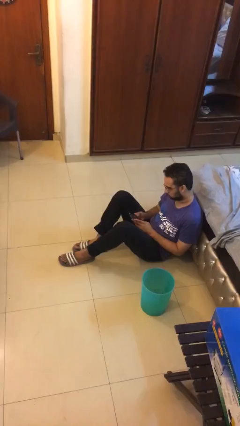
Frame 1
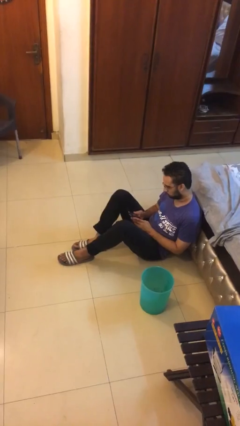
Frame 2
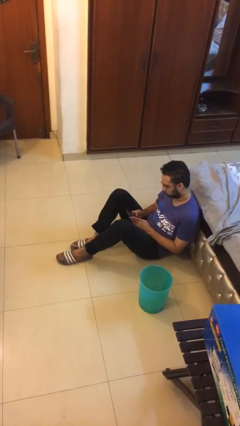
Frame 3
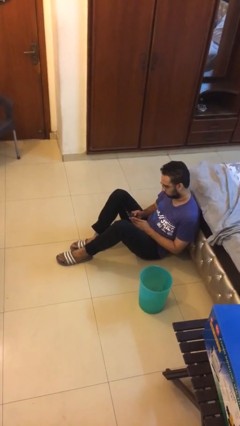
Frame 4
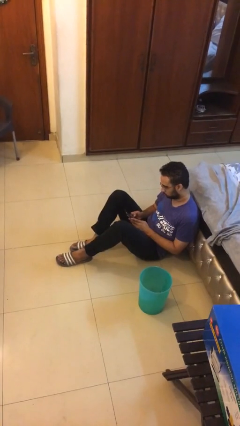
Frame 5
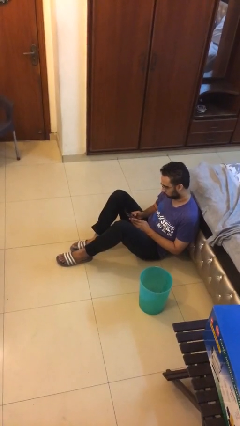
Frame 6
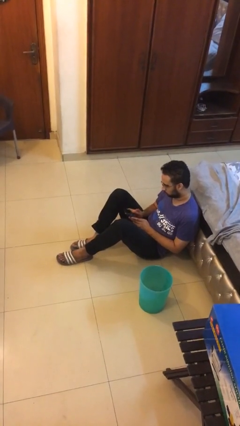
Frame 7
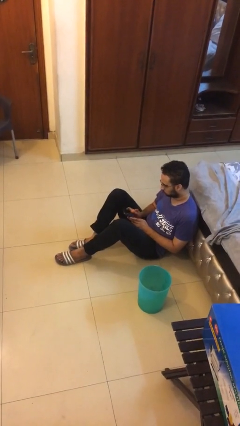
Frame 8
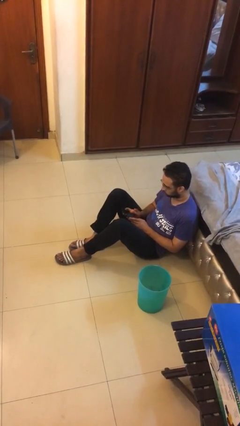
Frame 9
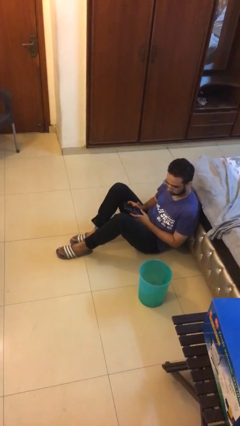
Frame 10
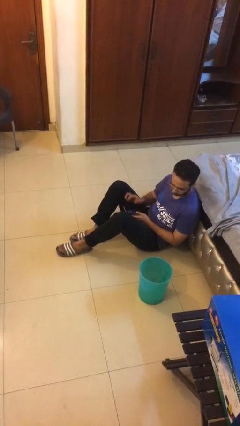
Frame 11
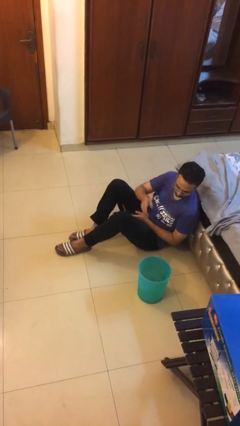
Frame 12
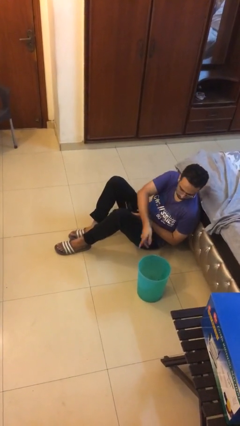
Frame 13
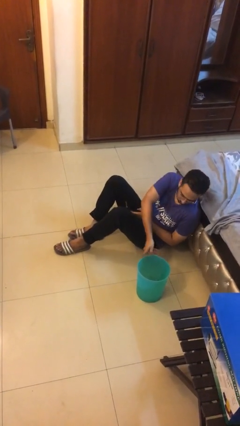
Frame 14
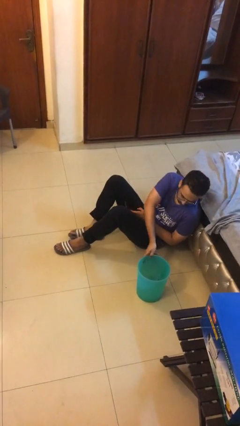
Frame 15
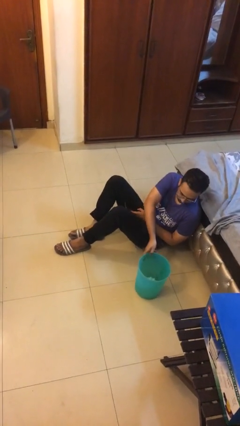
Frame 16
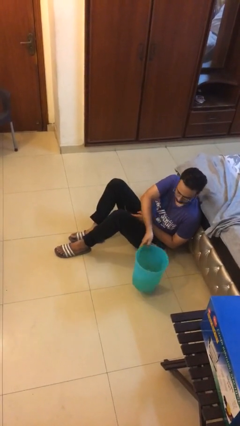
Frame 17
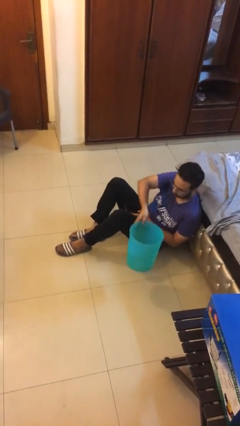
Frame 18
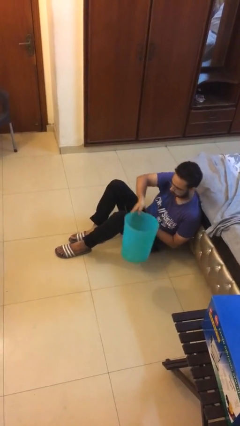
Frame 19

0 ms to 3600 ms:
person picks up object from floor

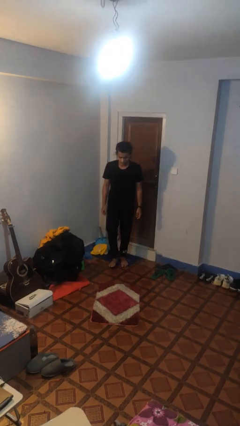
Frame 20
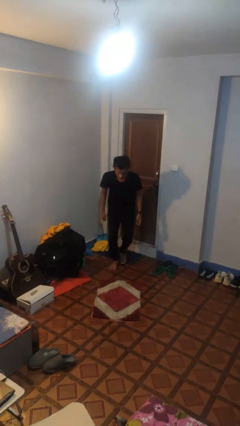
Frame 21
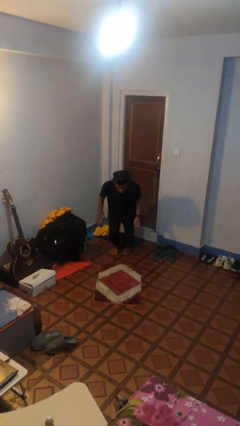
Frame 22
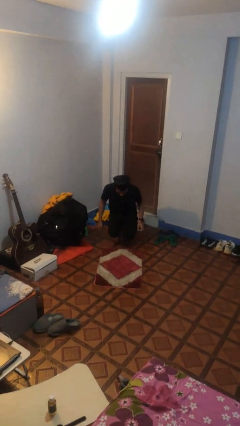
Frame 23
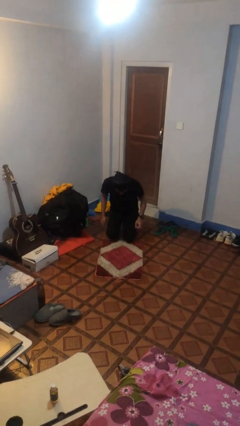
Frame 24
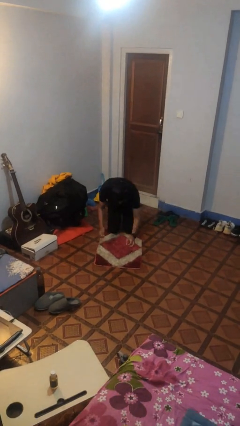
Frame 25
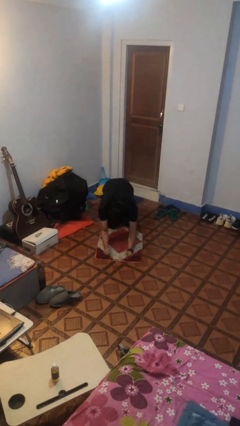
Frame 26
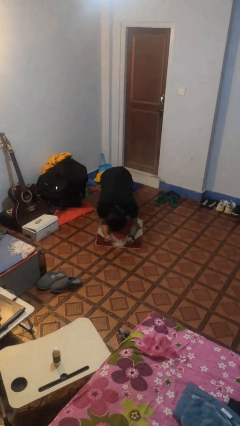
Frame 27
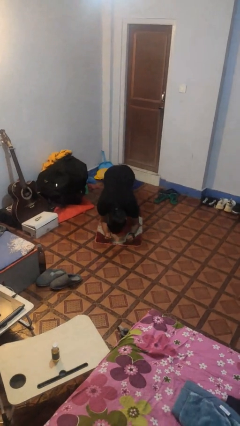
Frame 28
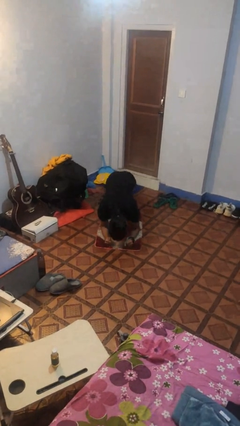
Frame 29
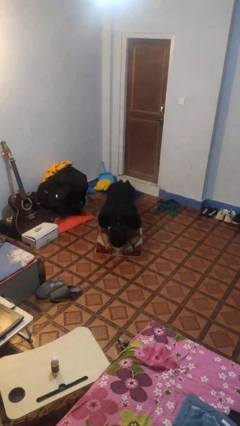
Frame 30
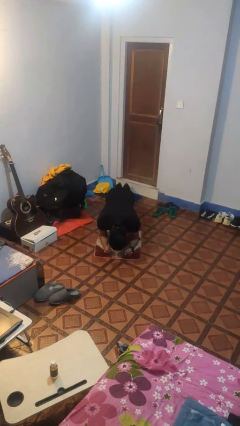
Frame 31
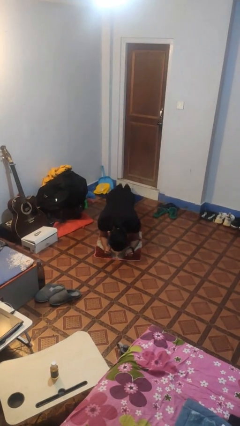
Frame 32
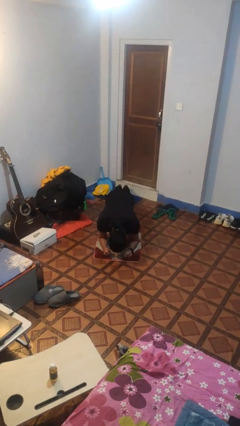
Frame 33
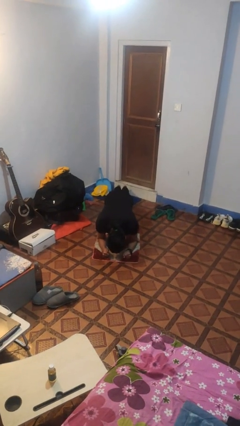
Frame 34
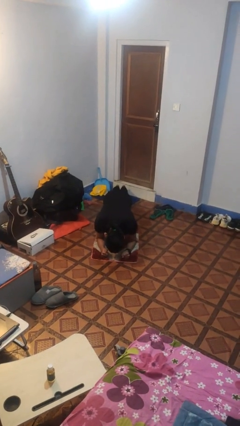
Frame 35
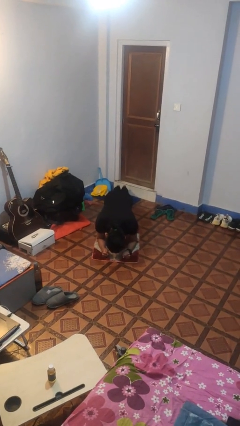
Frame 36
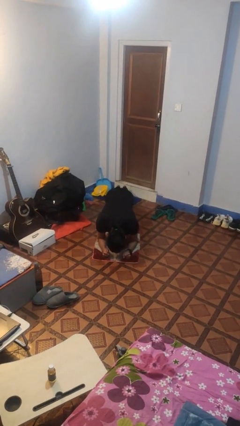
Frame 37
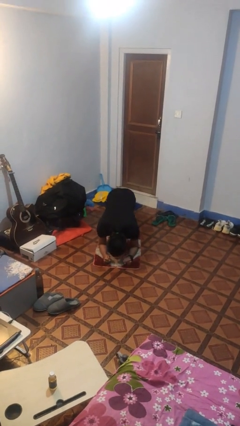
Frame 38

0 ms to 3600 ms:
person exercises with plank

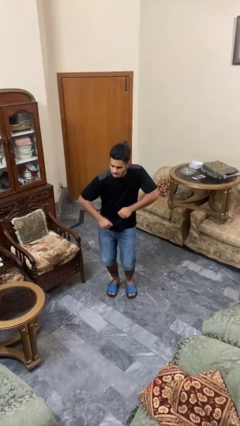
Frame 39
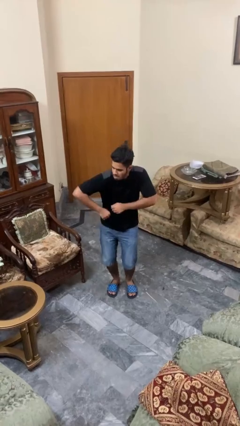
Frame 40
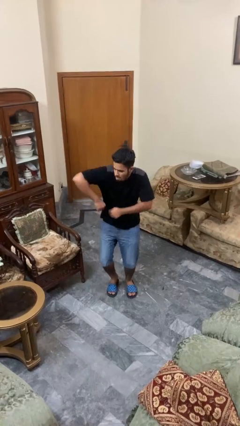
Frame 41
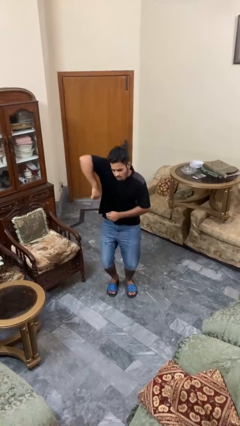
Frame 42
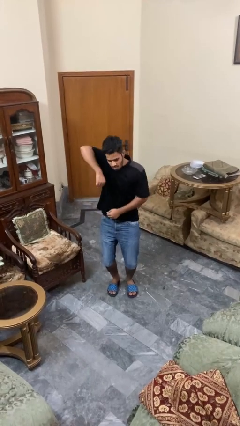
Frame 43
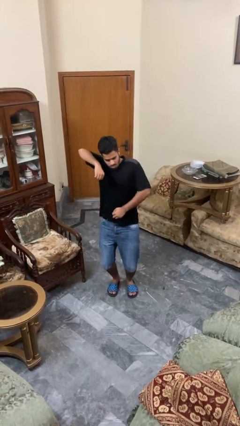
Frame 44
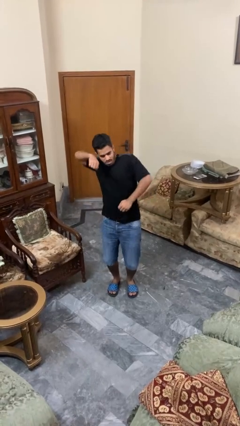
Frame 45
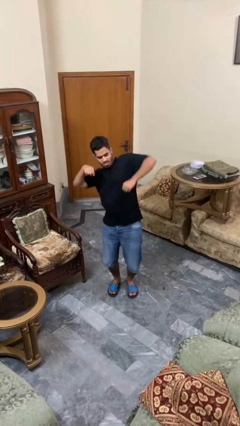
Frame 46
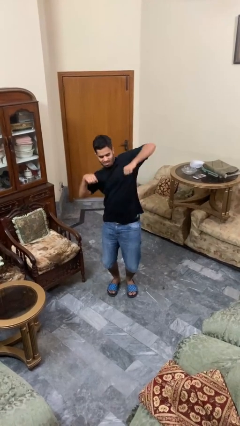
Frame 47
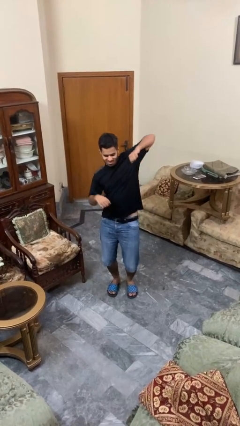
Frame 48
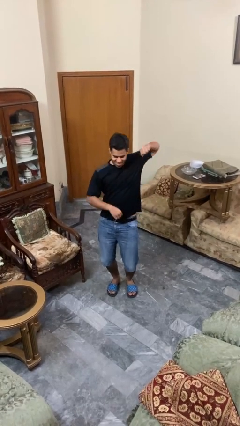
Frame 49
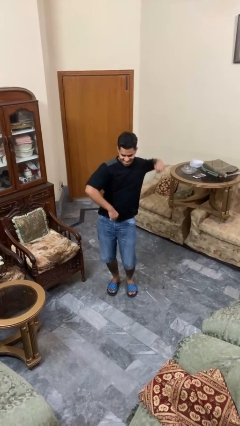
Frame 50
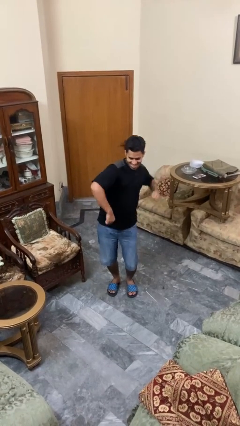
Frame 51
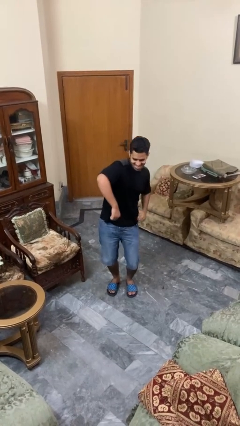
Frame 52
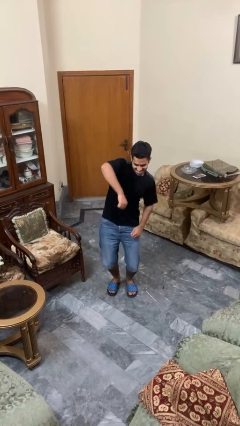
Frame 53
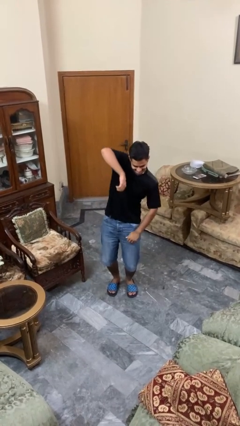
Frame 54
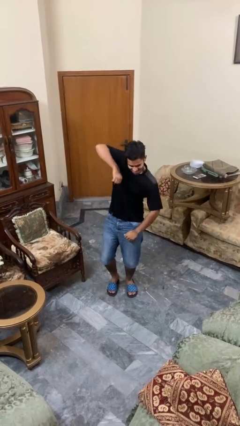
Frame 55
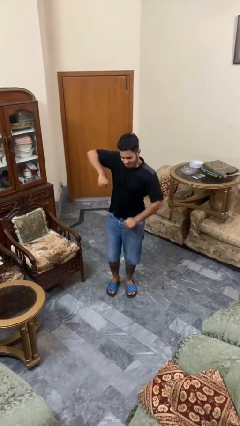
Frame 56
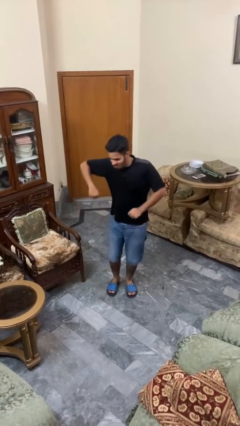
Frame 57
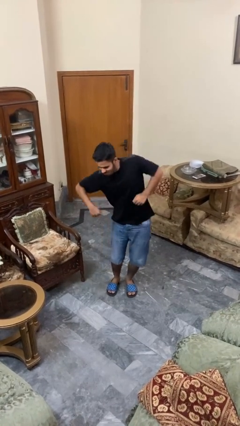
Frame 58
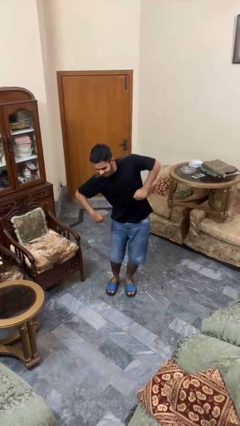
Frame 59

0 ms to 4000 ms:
person dances in place

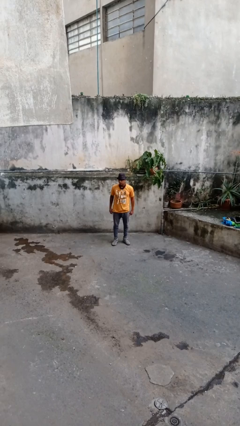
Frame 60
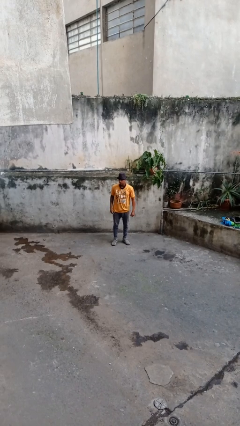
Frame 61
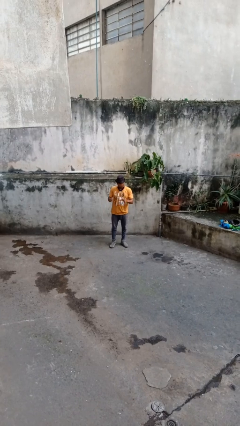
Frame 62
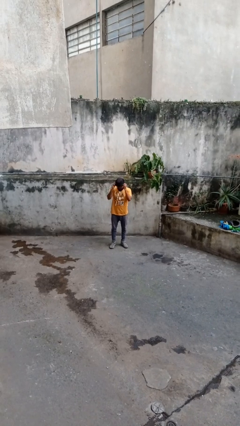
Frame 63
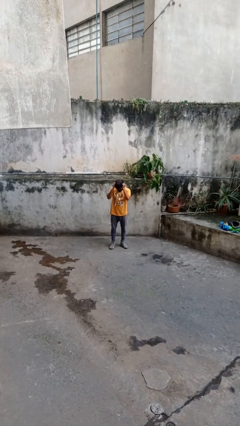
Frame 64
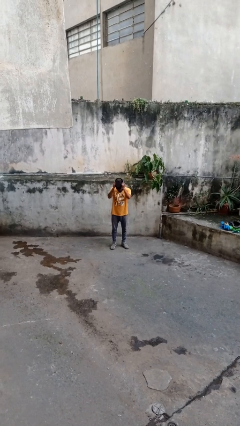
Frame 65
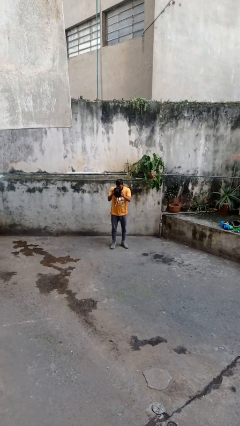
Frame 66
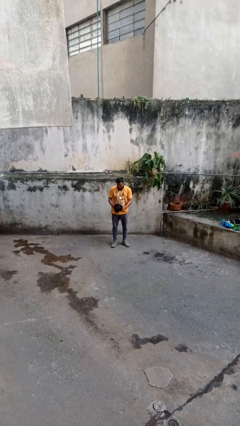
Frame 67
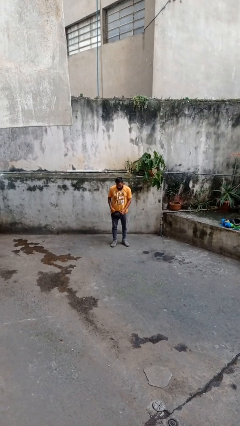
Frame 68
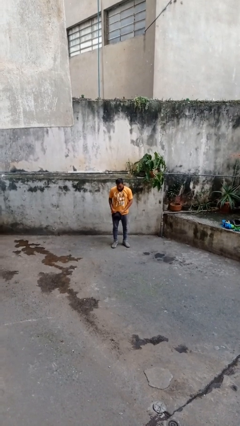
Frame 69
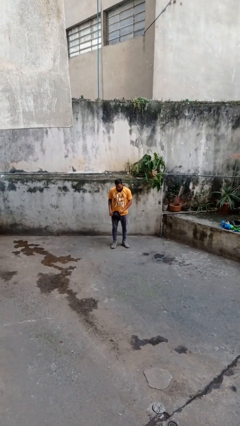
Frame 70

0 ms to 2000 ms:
person takes off hat

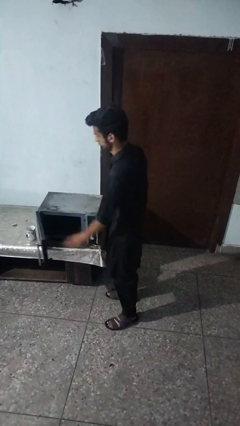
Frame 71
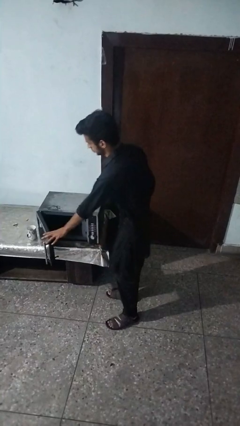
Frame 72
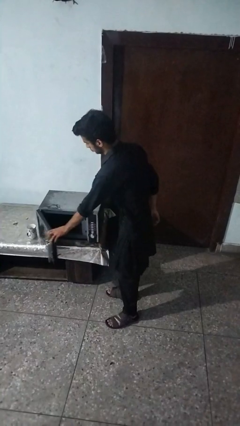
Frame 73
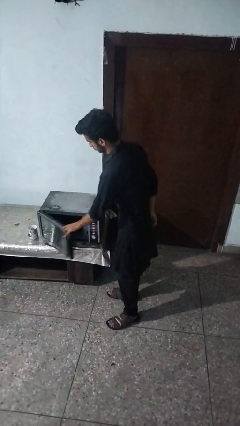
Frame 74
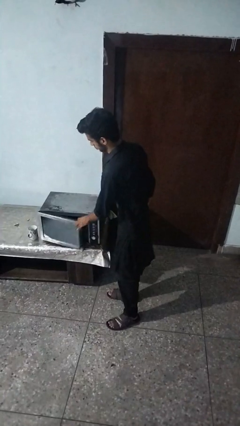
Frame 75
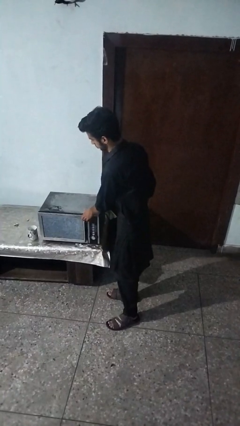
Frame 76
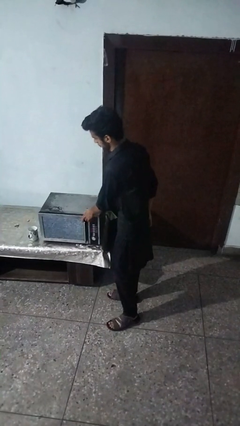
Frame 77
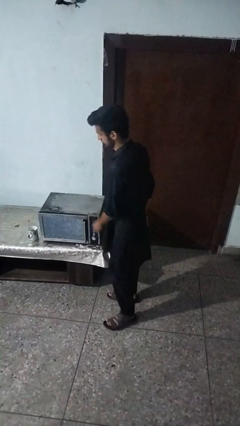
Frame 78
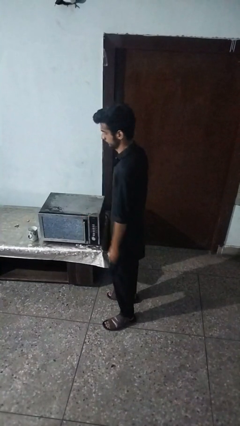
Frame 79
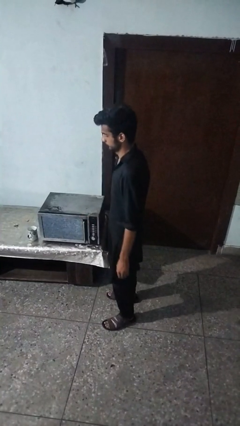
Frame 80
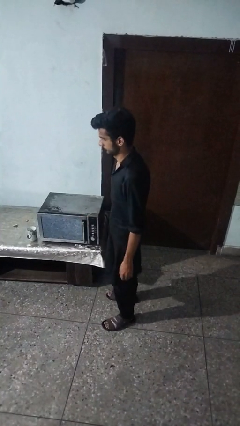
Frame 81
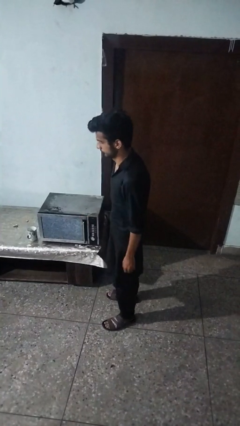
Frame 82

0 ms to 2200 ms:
person closes oven door

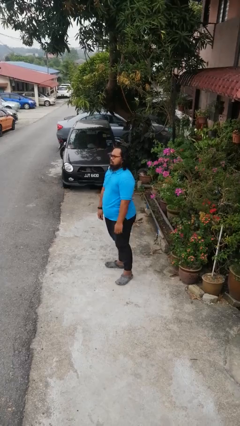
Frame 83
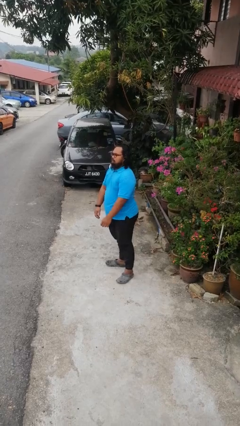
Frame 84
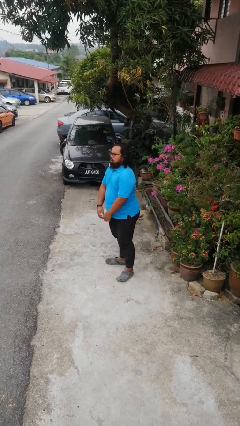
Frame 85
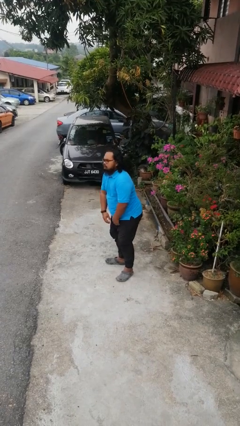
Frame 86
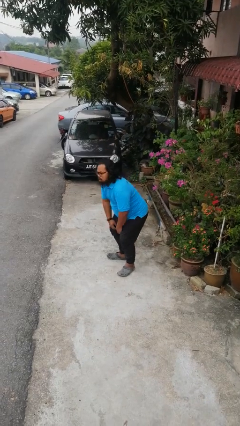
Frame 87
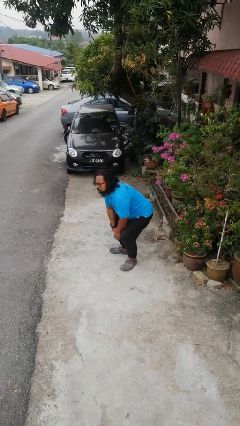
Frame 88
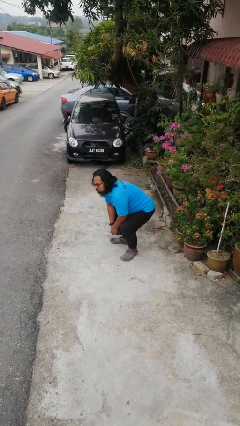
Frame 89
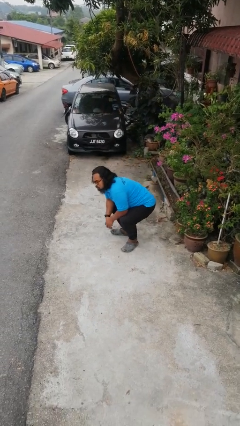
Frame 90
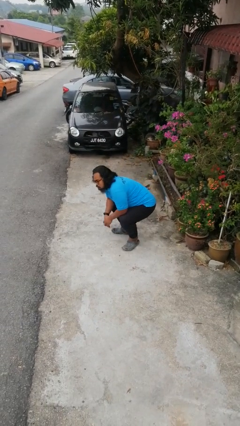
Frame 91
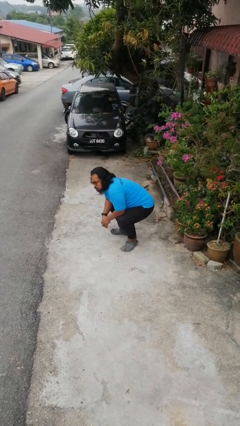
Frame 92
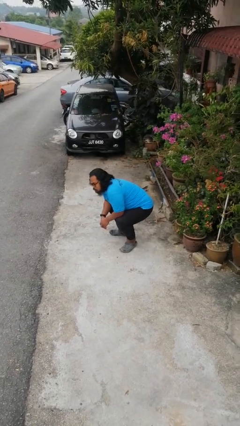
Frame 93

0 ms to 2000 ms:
person squats
